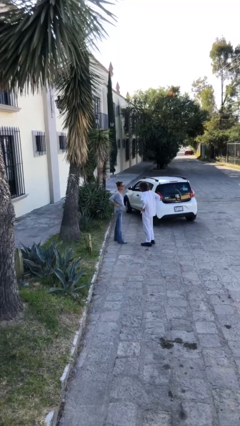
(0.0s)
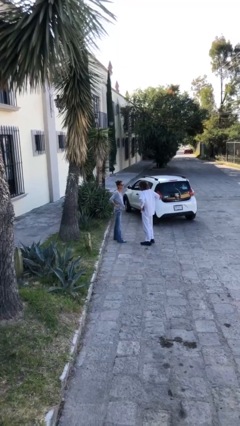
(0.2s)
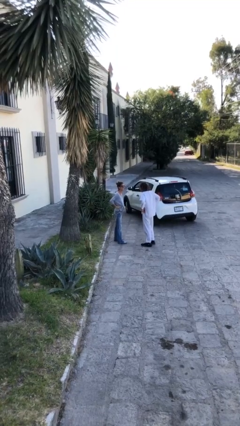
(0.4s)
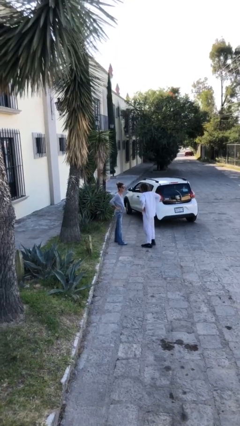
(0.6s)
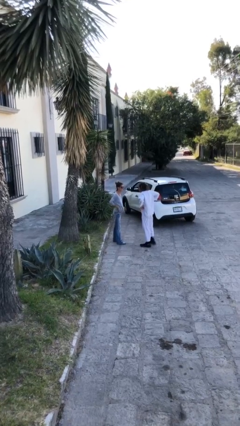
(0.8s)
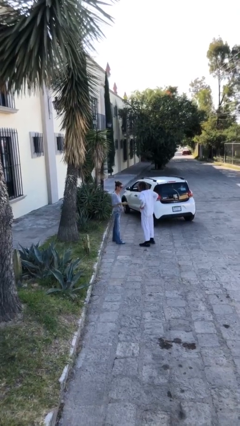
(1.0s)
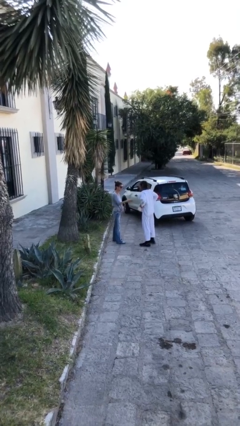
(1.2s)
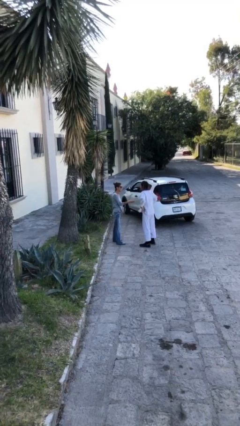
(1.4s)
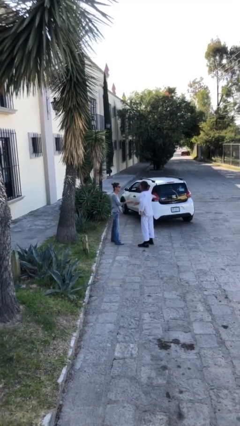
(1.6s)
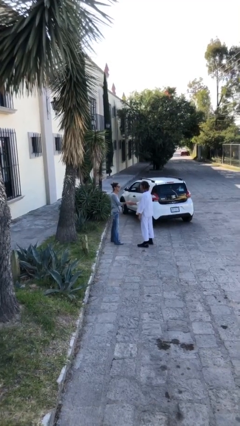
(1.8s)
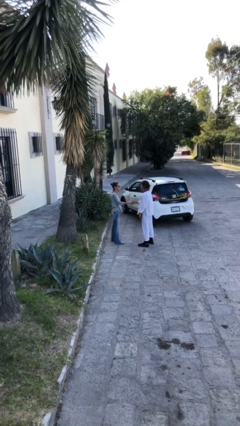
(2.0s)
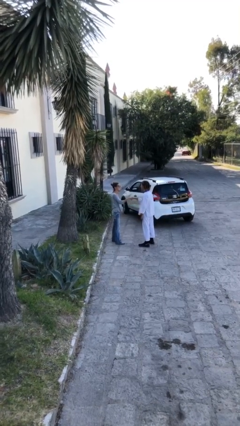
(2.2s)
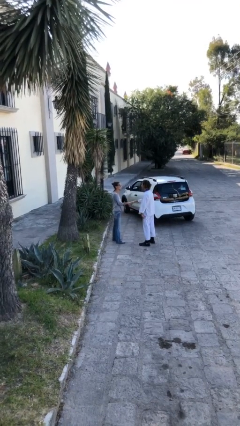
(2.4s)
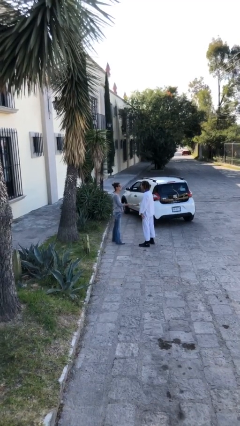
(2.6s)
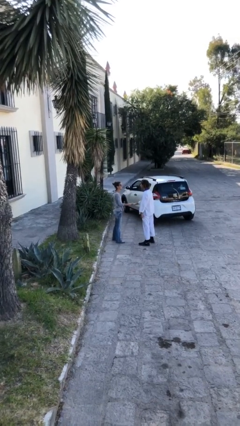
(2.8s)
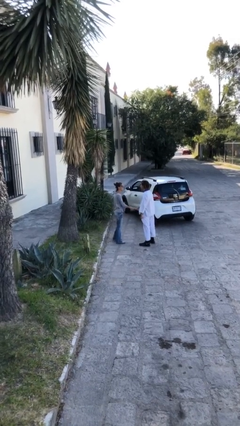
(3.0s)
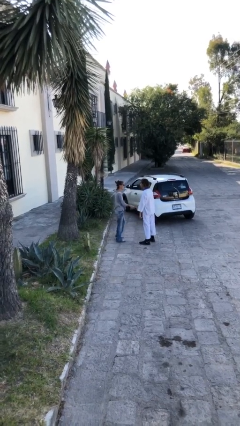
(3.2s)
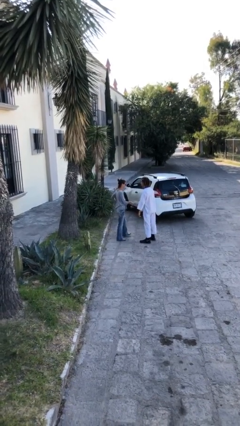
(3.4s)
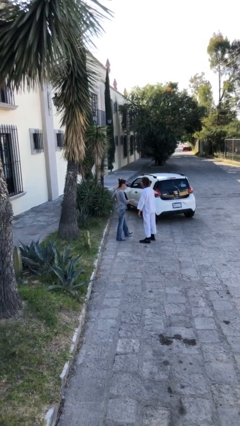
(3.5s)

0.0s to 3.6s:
person shakes hand

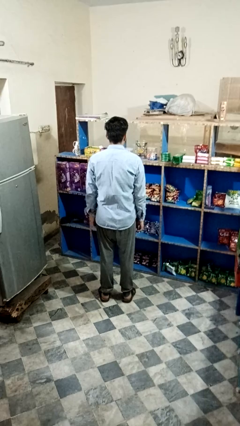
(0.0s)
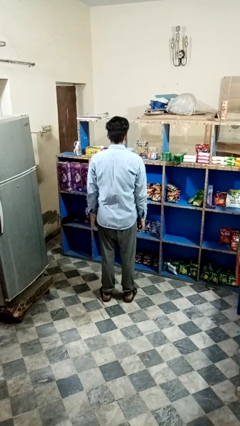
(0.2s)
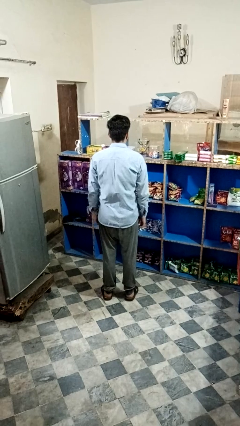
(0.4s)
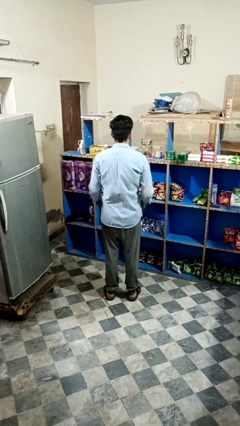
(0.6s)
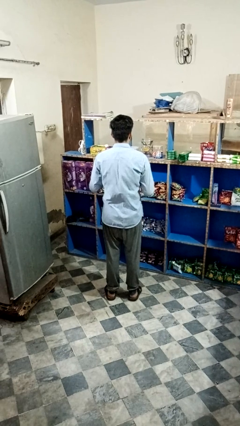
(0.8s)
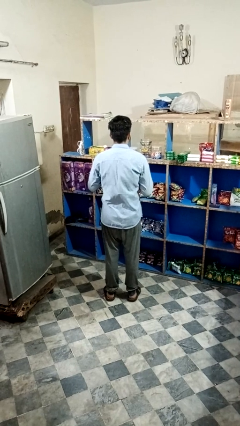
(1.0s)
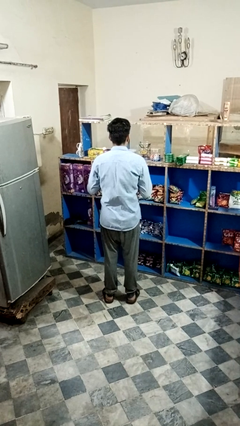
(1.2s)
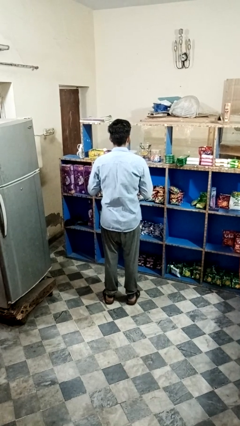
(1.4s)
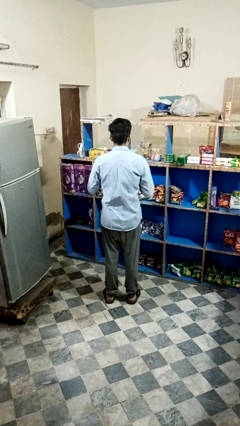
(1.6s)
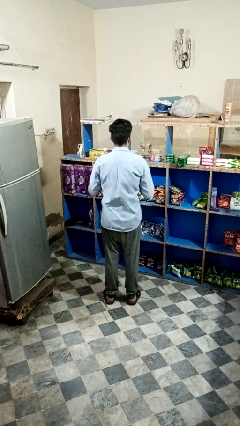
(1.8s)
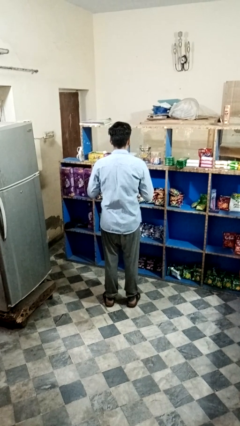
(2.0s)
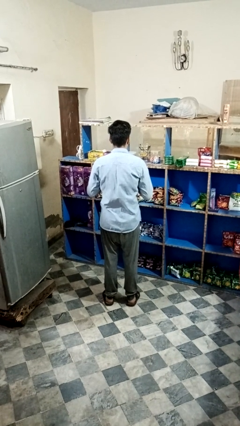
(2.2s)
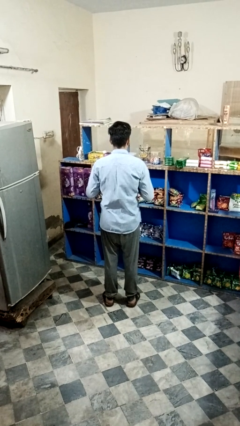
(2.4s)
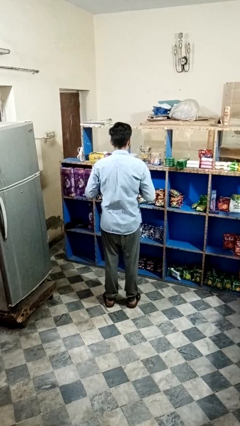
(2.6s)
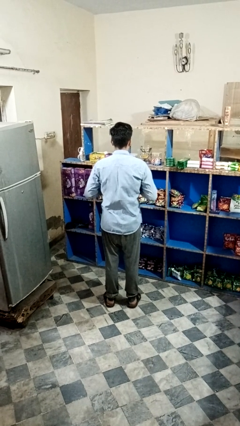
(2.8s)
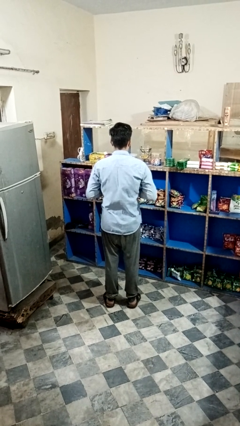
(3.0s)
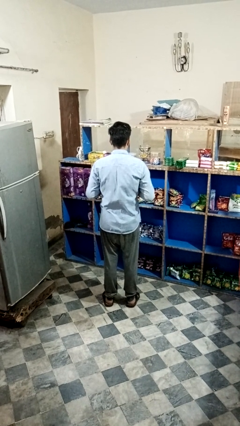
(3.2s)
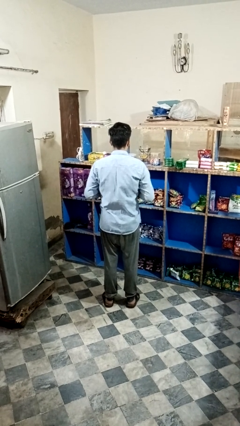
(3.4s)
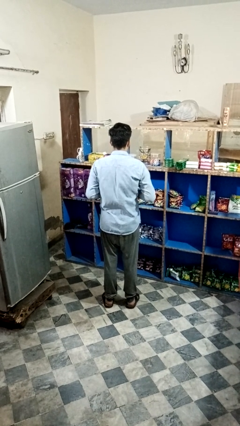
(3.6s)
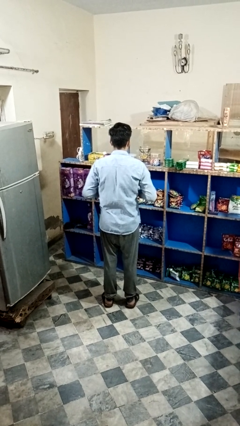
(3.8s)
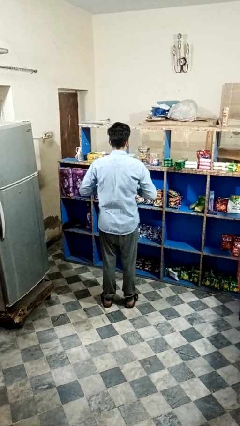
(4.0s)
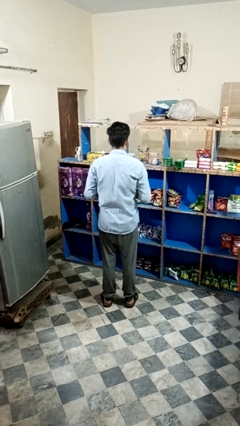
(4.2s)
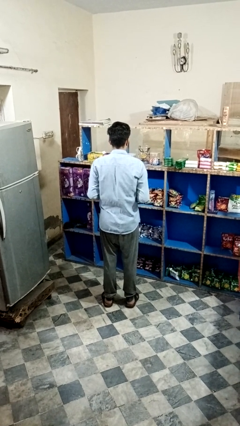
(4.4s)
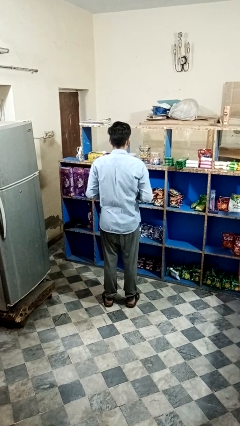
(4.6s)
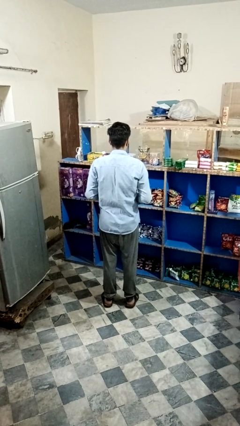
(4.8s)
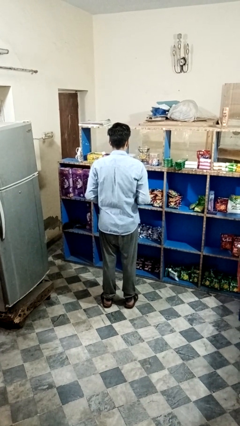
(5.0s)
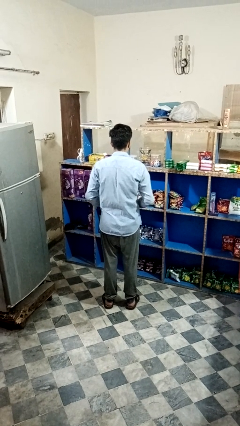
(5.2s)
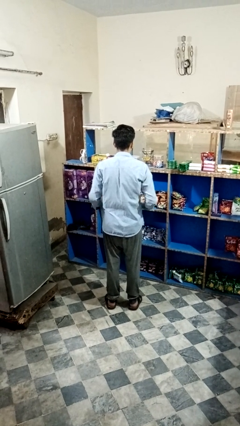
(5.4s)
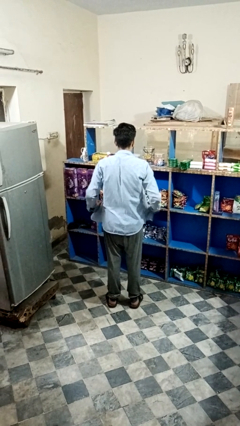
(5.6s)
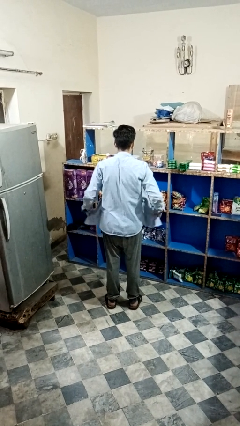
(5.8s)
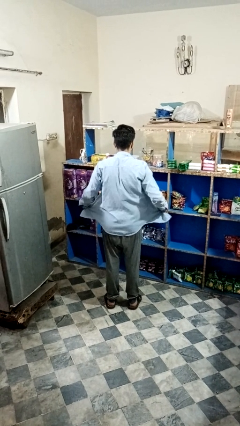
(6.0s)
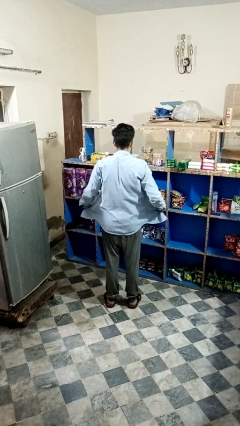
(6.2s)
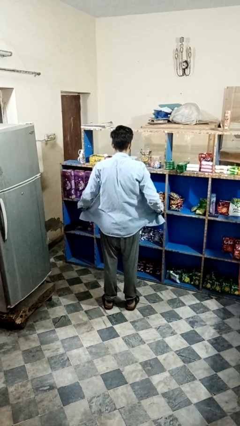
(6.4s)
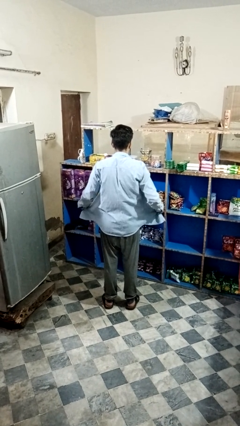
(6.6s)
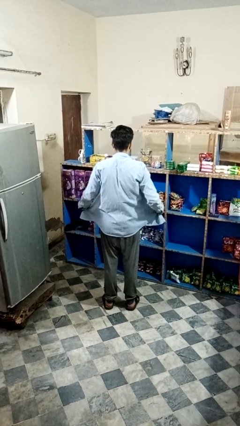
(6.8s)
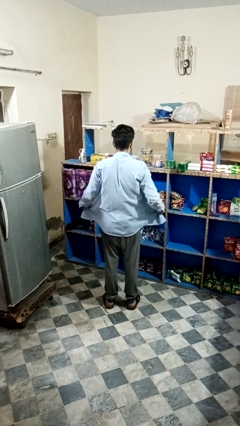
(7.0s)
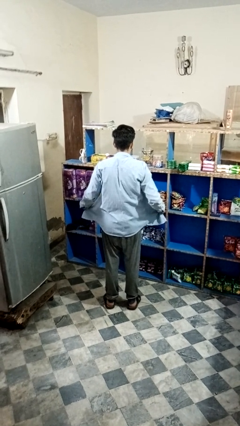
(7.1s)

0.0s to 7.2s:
person unbuttons shirt

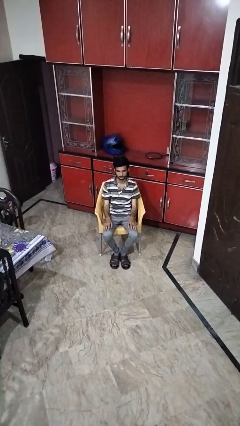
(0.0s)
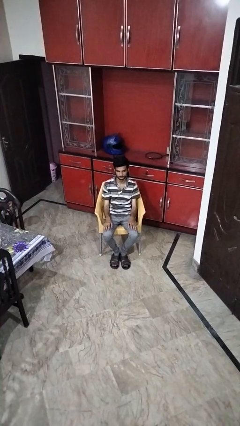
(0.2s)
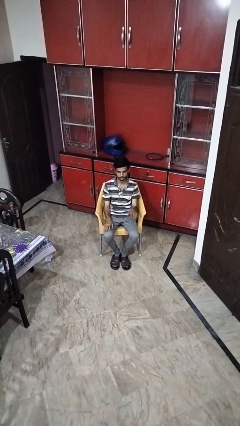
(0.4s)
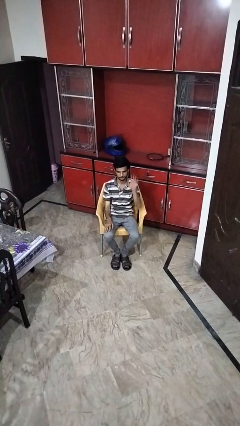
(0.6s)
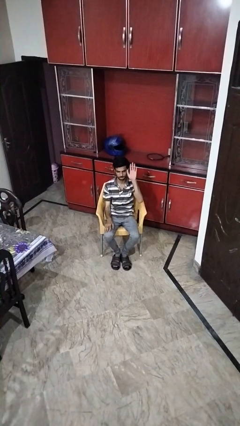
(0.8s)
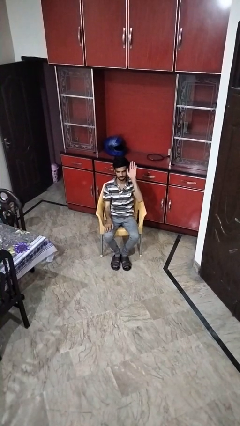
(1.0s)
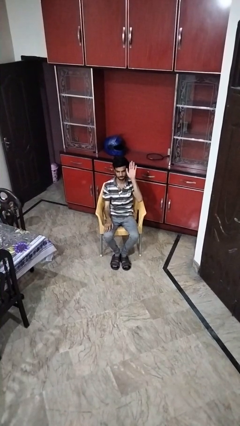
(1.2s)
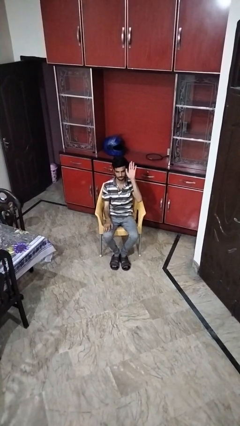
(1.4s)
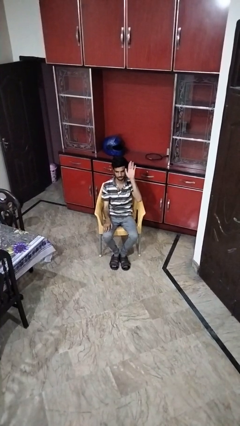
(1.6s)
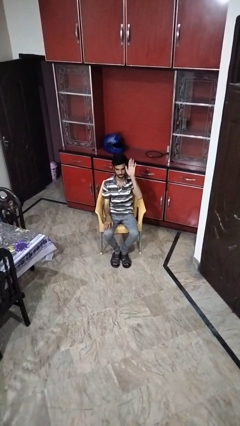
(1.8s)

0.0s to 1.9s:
person gestures raise hand

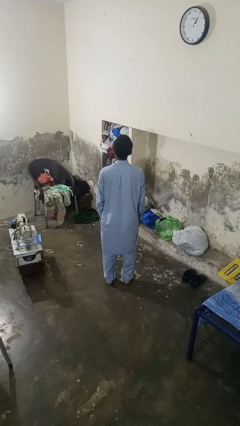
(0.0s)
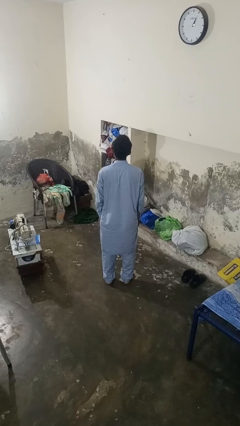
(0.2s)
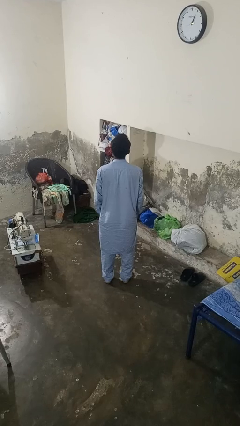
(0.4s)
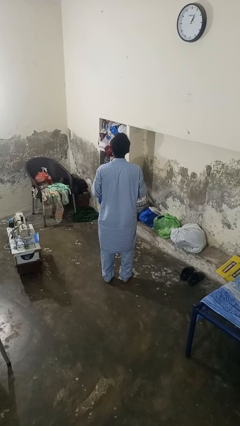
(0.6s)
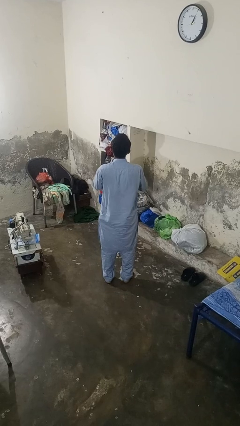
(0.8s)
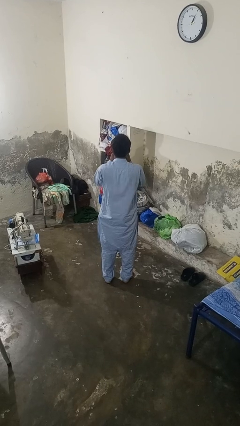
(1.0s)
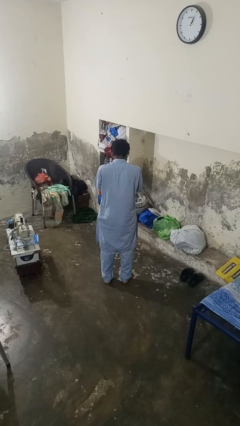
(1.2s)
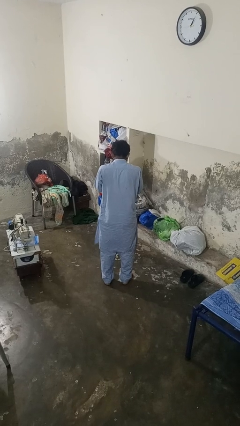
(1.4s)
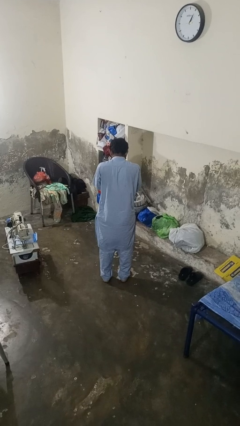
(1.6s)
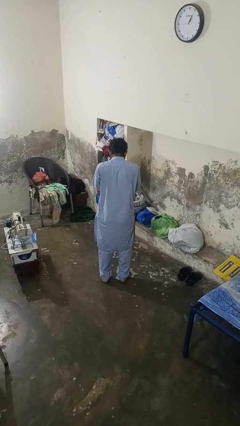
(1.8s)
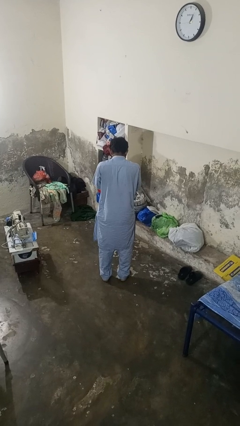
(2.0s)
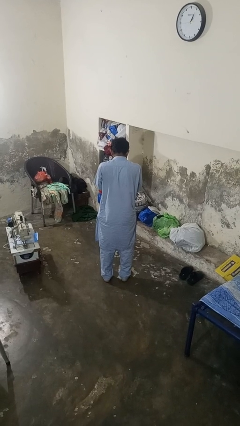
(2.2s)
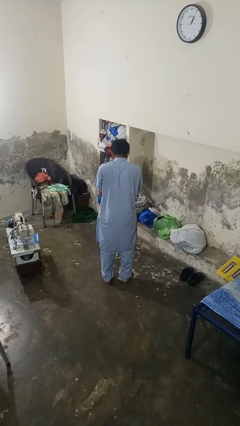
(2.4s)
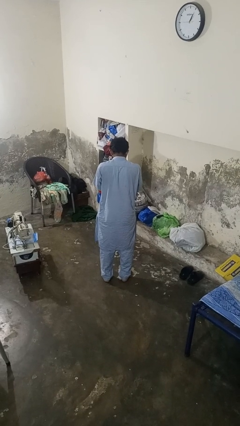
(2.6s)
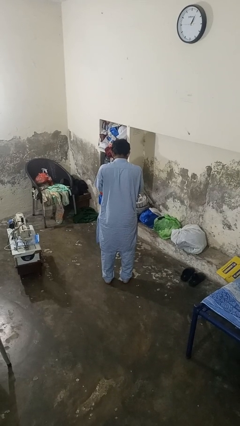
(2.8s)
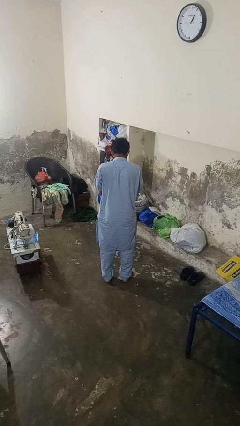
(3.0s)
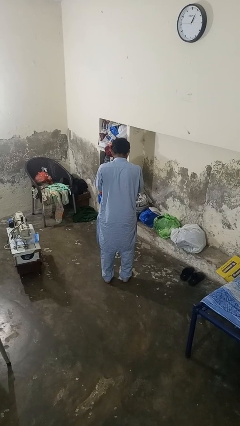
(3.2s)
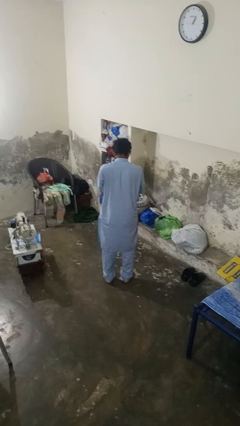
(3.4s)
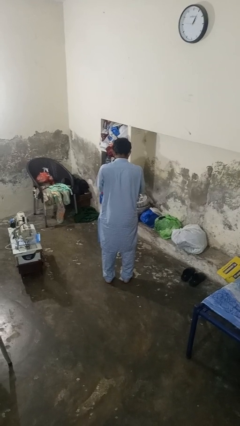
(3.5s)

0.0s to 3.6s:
person sneezes into hand

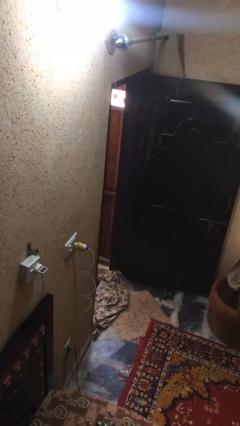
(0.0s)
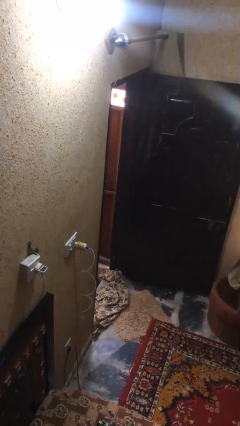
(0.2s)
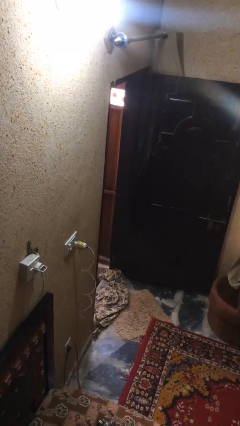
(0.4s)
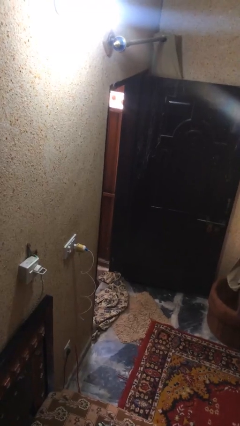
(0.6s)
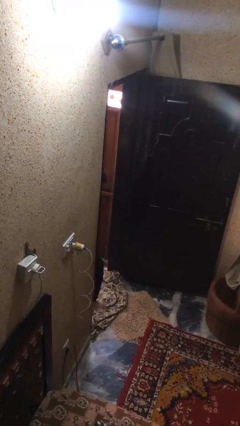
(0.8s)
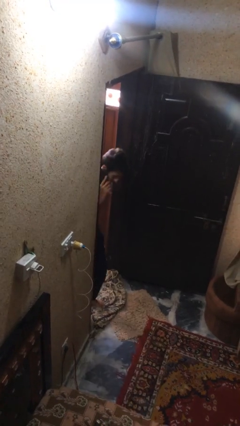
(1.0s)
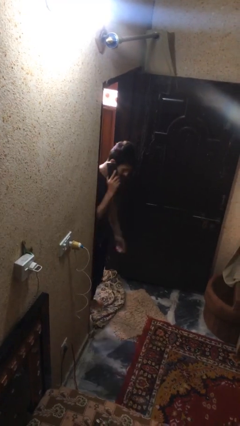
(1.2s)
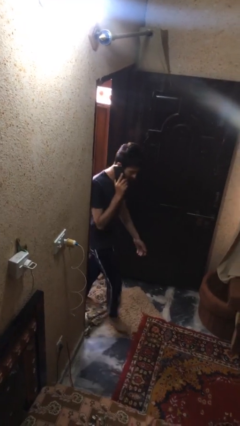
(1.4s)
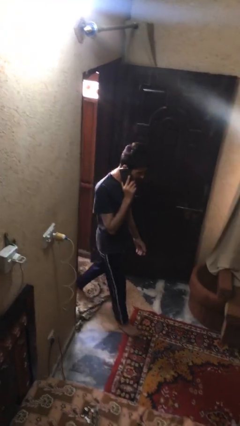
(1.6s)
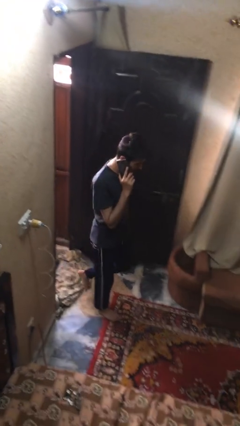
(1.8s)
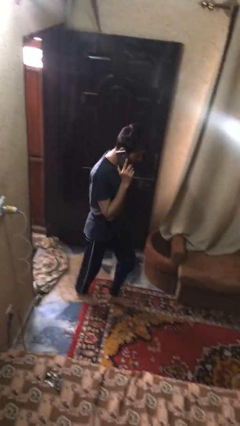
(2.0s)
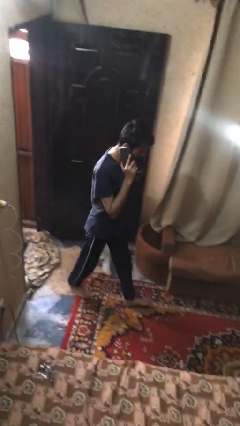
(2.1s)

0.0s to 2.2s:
person enters scene through structure
